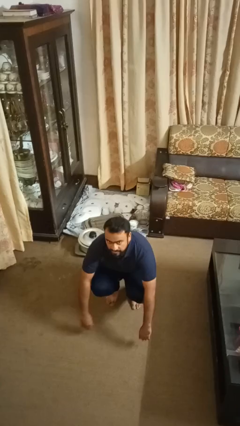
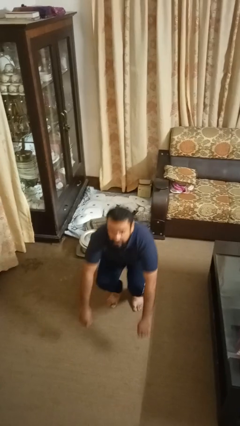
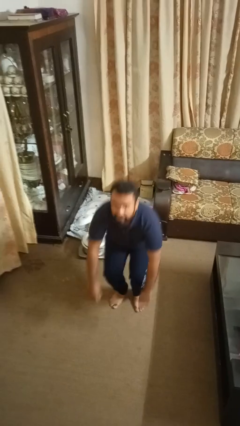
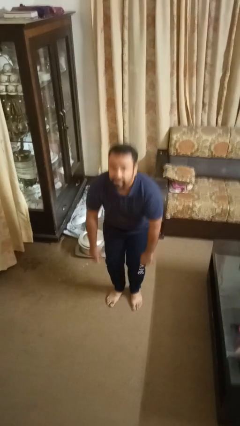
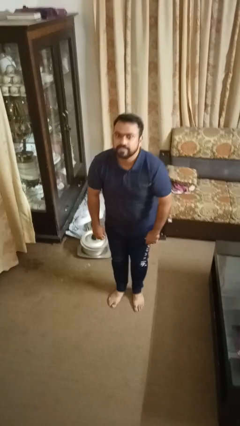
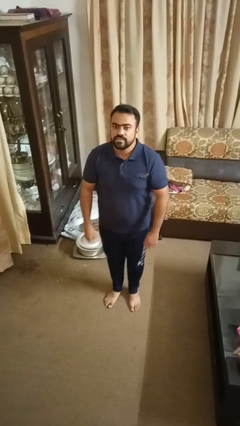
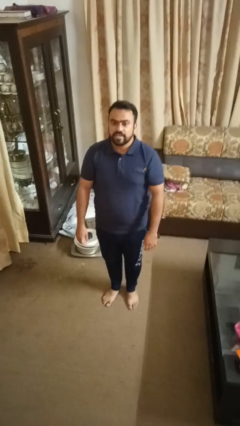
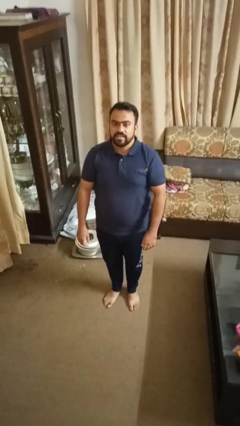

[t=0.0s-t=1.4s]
person stands up

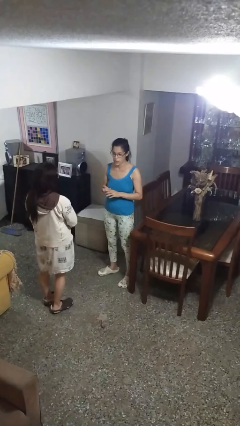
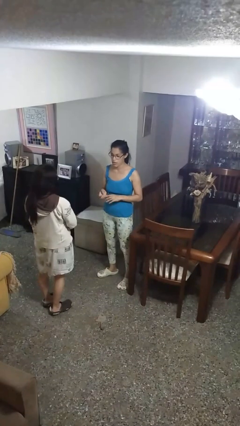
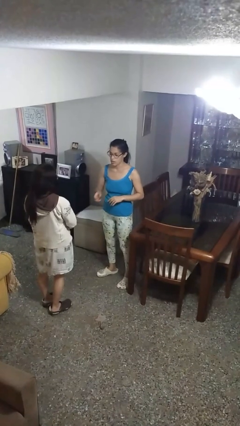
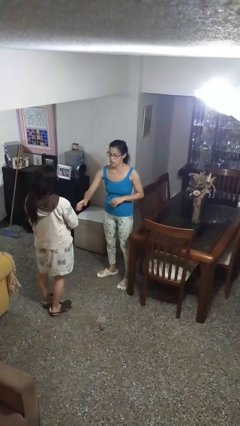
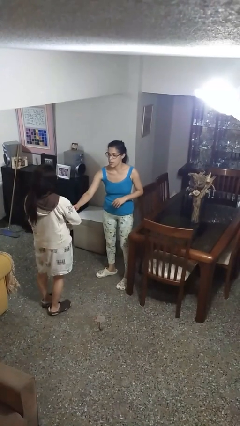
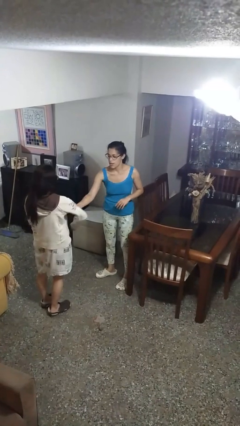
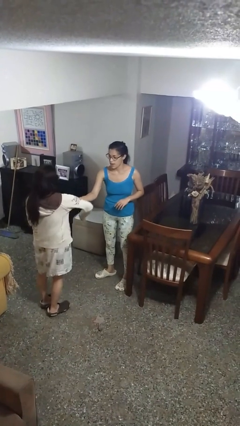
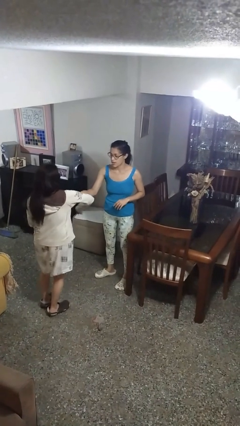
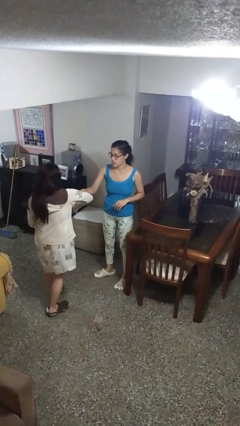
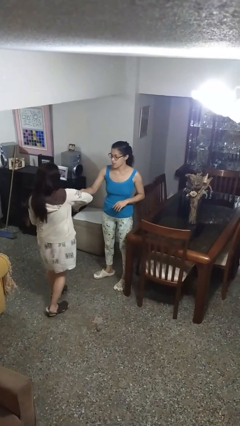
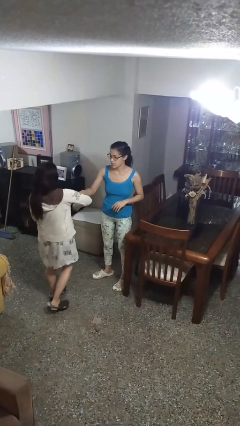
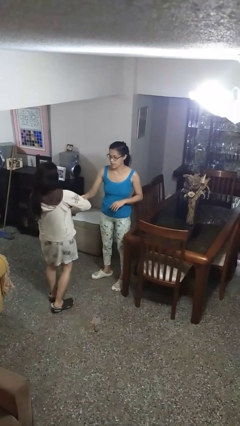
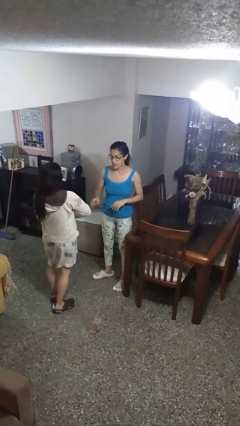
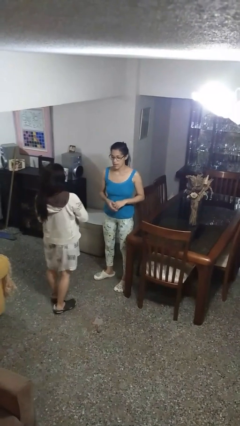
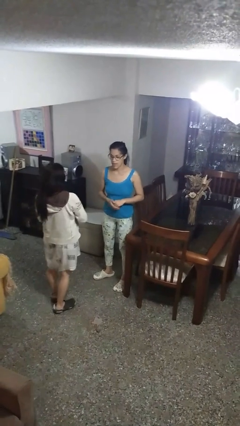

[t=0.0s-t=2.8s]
person grabs person by bicep

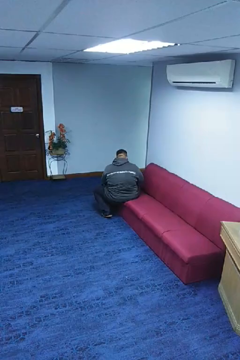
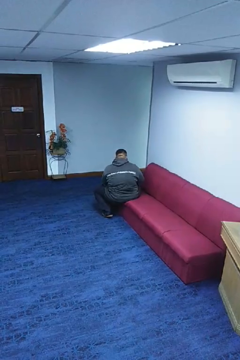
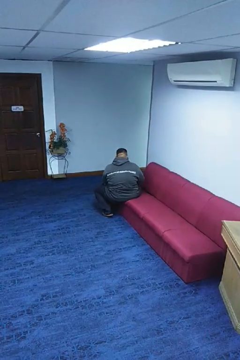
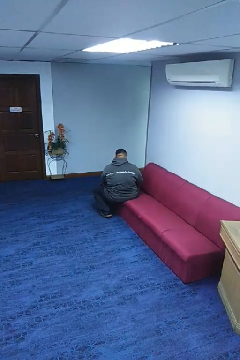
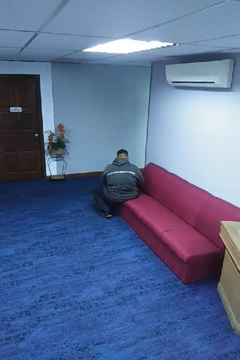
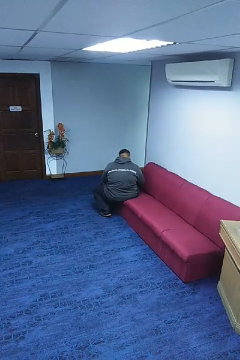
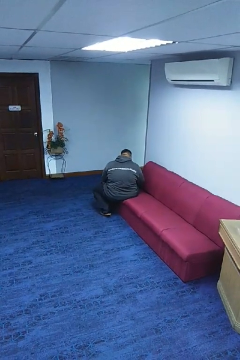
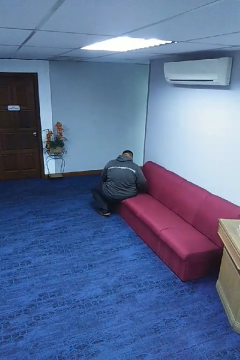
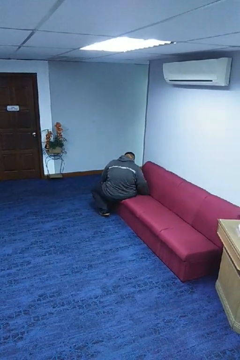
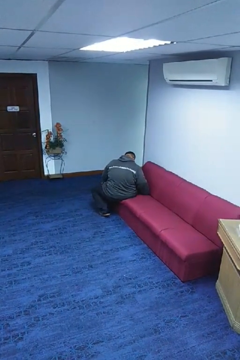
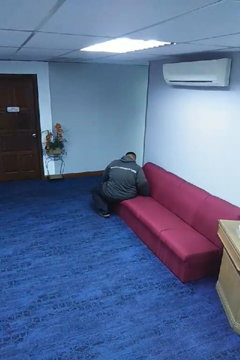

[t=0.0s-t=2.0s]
person searches in couch

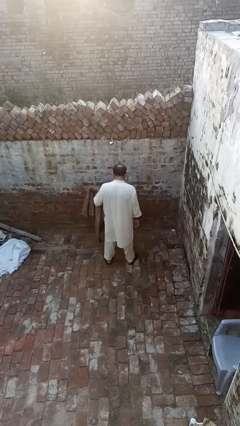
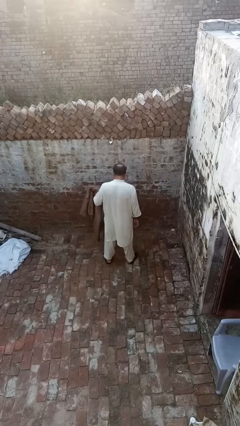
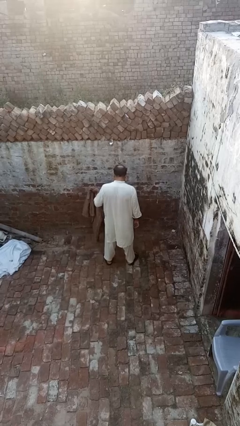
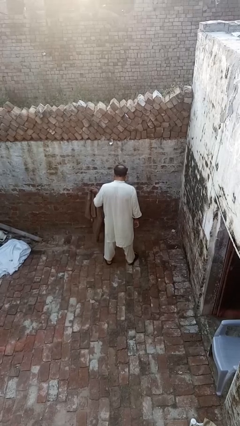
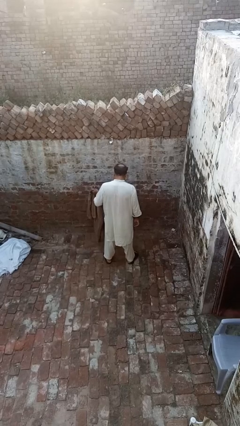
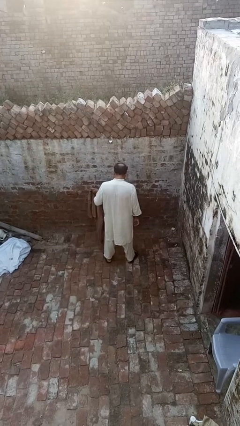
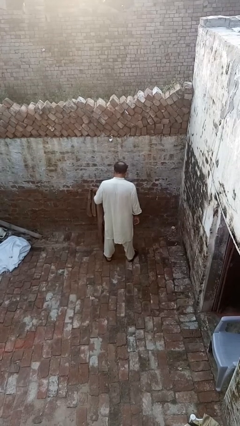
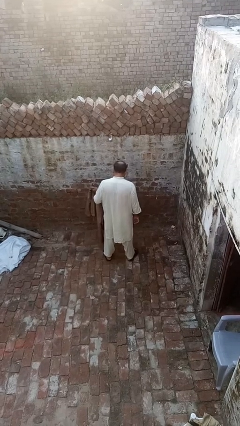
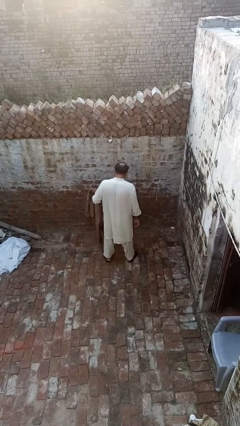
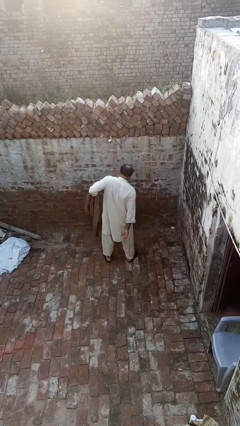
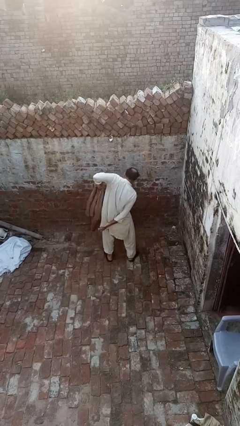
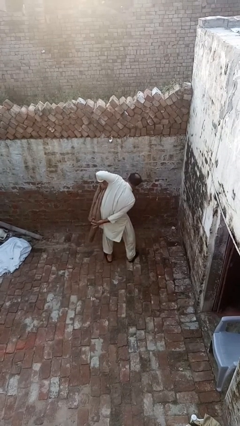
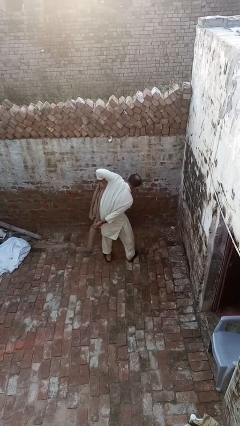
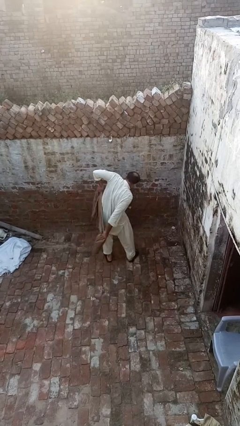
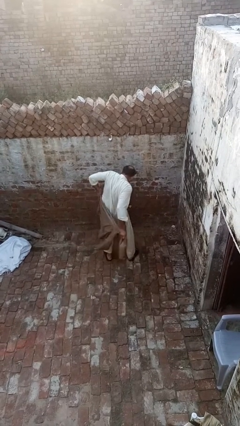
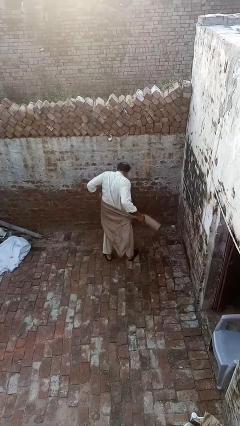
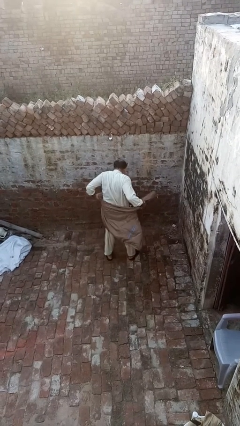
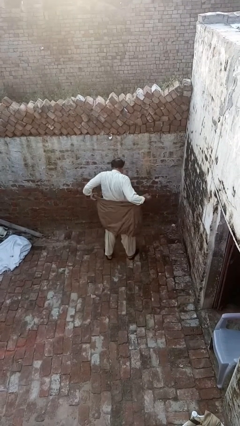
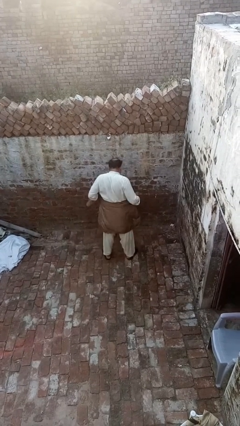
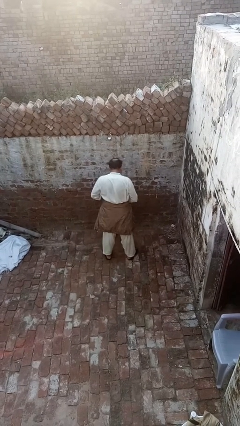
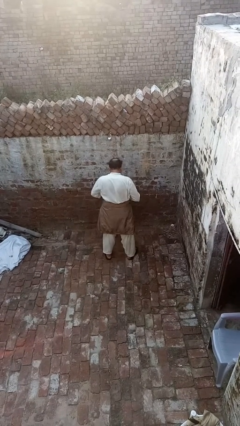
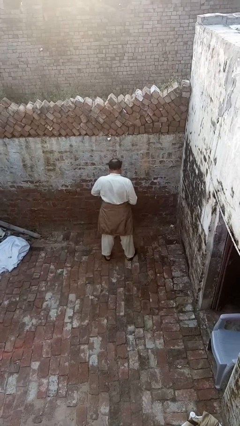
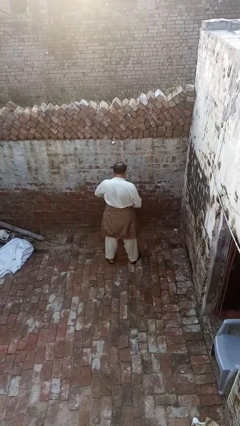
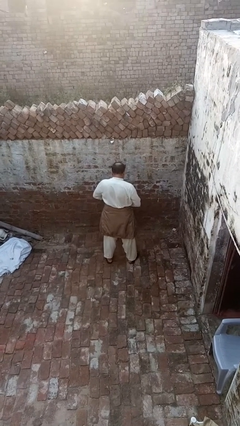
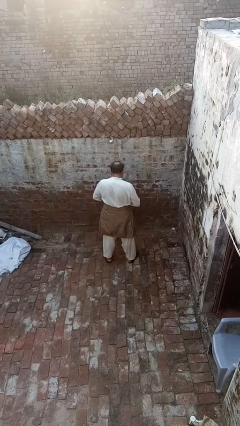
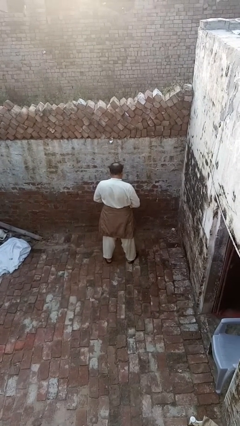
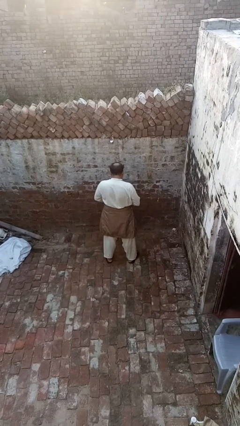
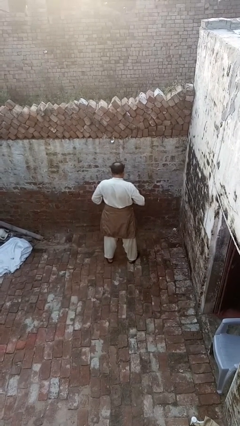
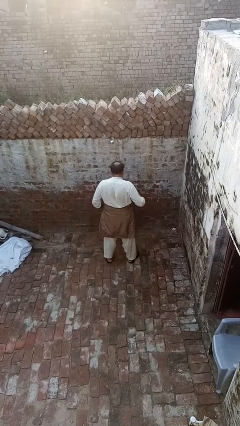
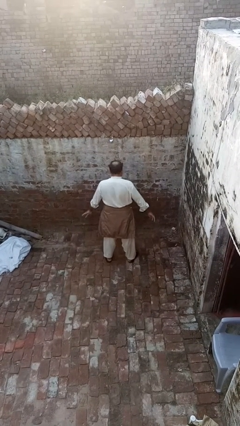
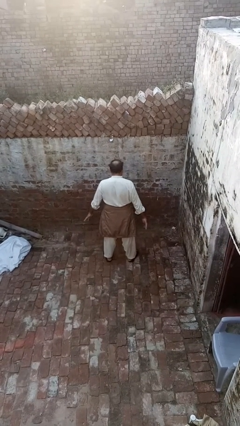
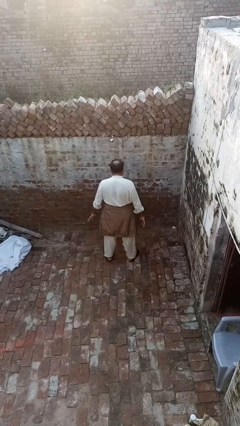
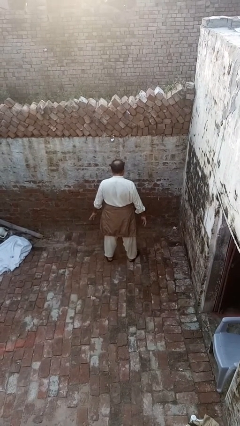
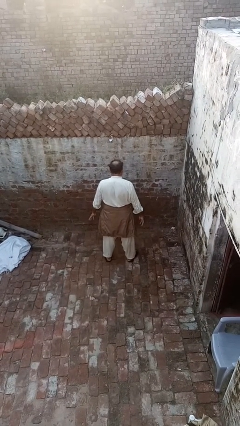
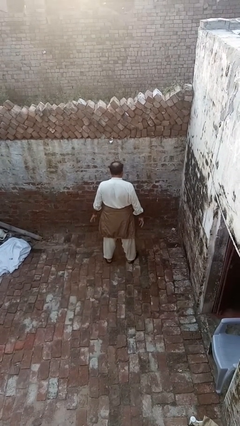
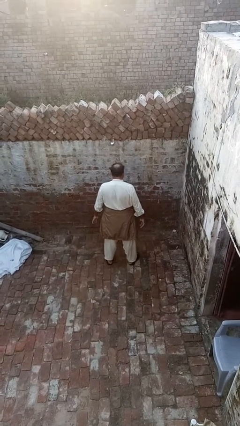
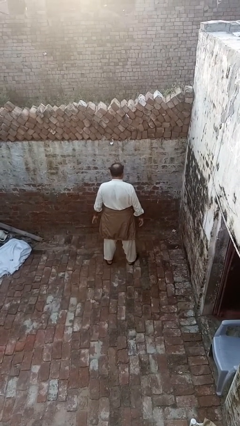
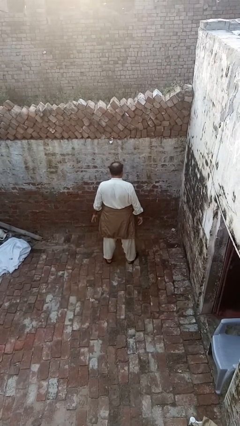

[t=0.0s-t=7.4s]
person ties jacket around waist

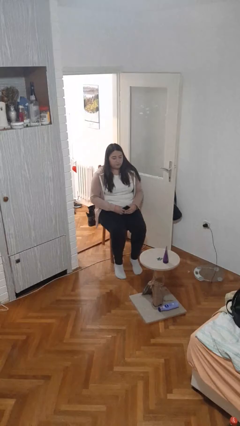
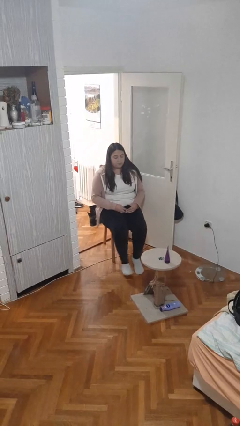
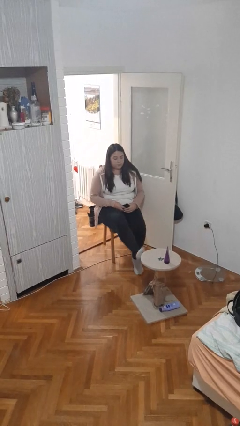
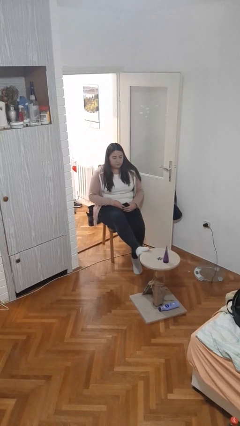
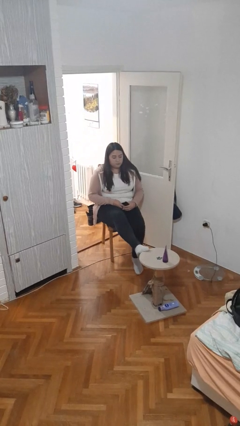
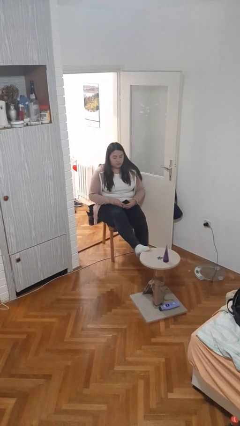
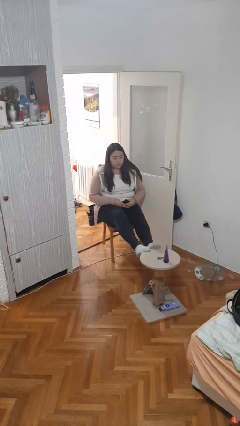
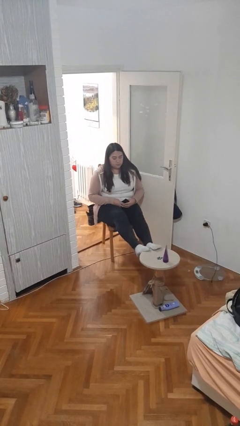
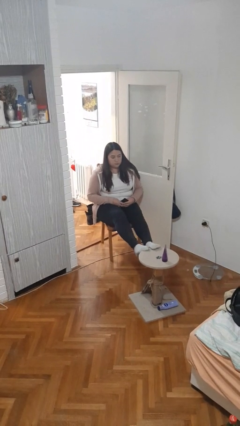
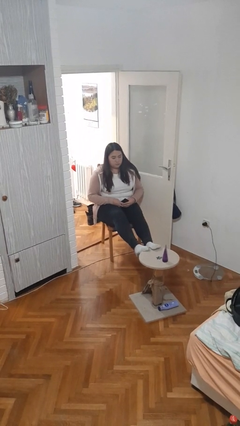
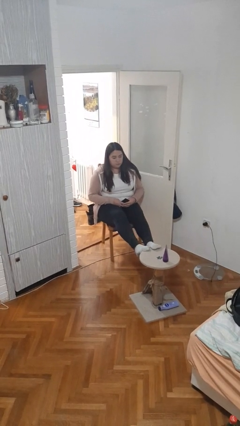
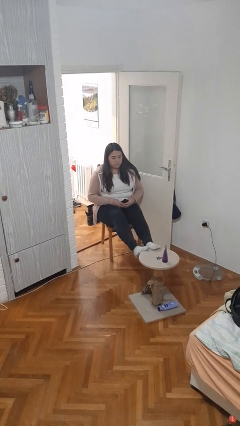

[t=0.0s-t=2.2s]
person puts feet up

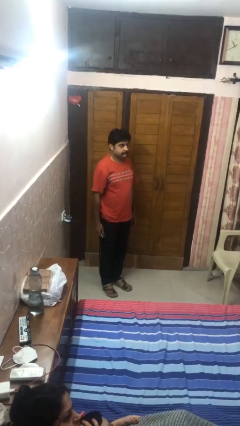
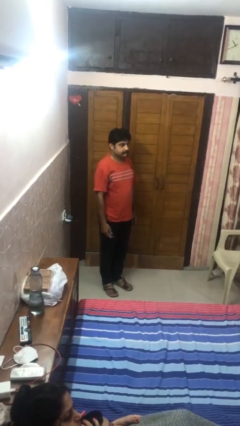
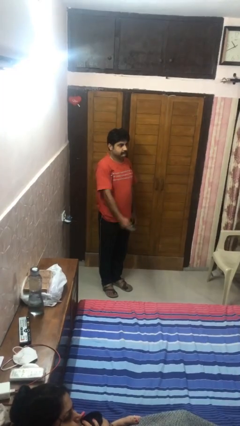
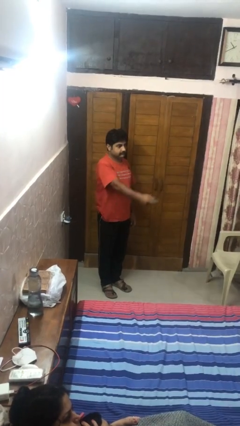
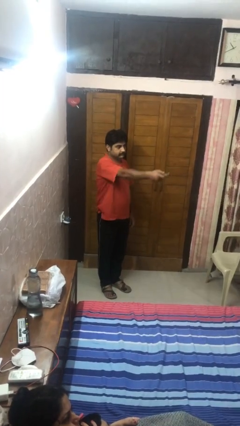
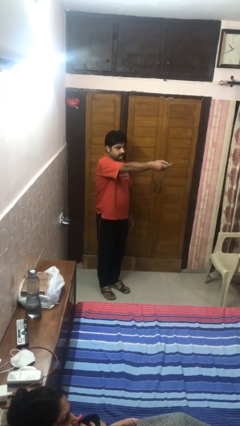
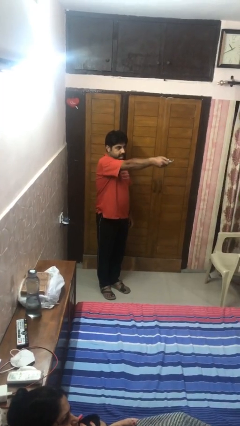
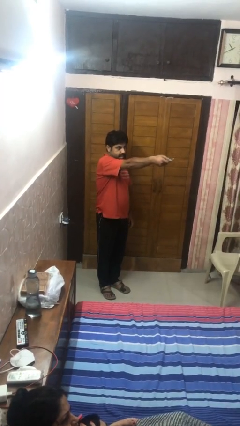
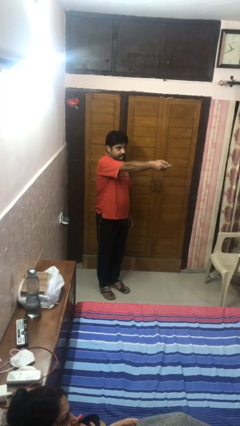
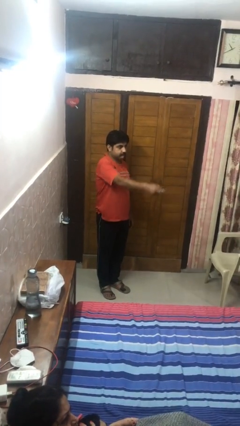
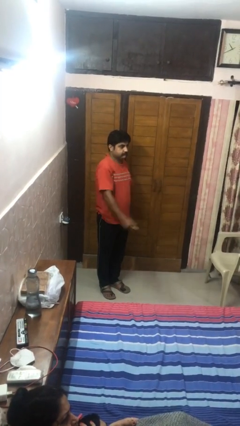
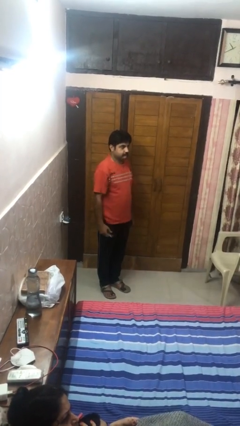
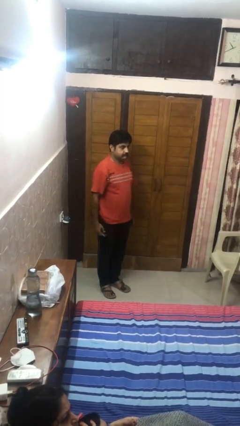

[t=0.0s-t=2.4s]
person uses television remote
